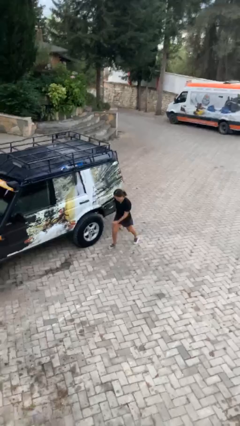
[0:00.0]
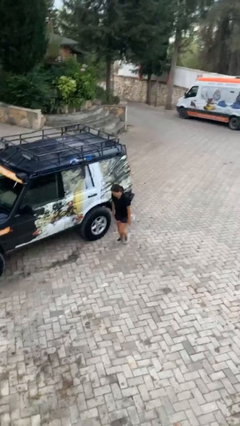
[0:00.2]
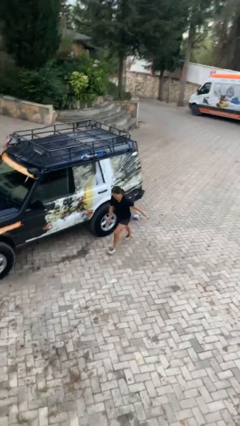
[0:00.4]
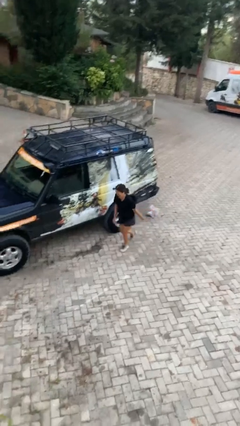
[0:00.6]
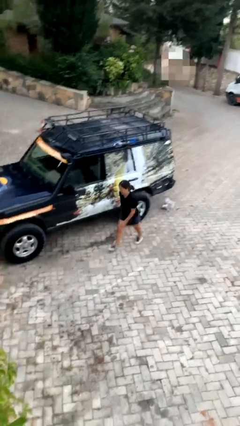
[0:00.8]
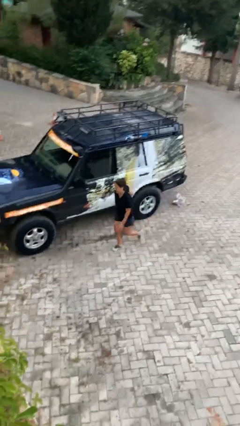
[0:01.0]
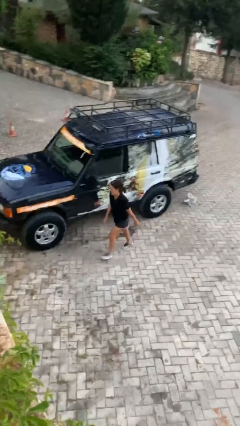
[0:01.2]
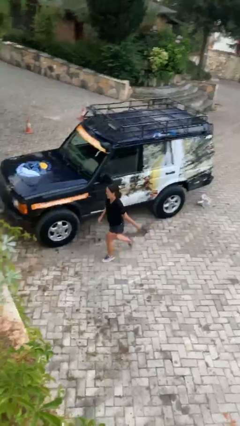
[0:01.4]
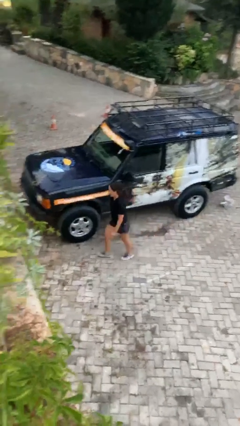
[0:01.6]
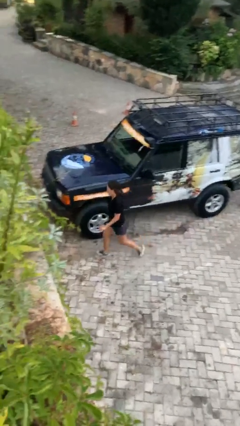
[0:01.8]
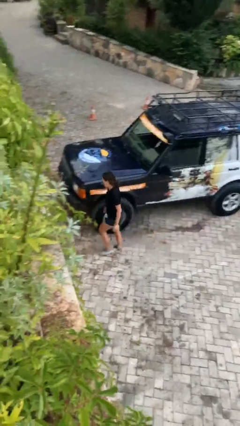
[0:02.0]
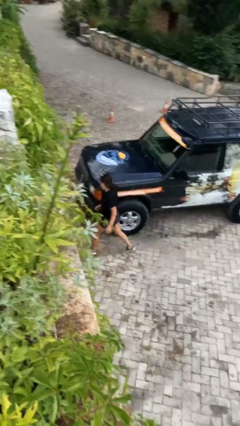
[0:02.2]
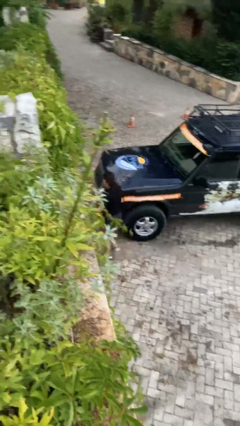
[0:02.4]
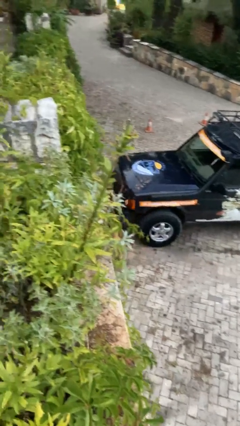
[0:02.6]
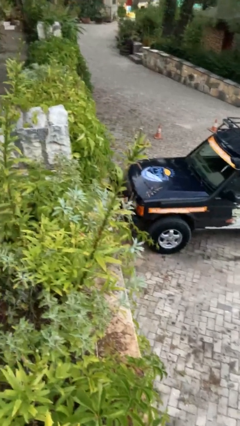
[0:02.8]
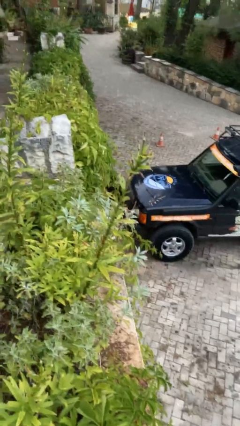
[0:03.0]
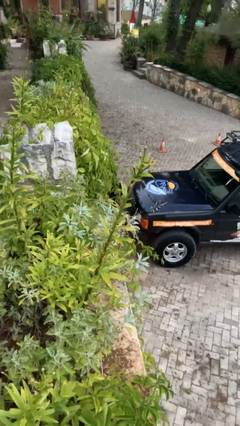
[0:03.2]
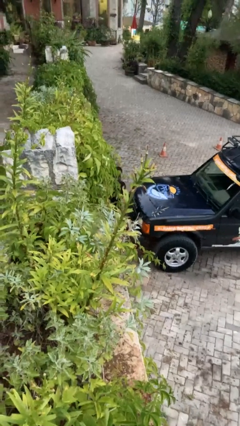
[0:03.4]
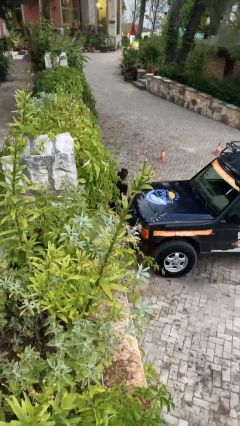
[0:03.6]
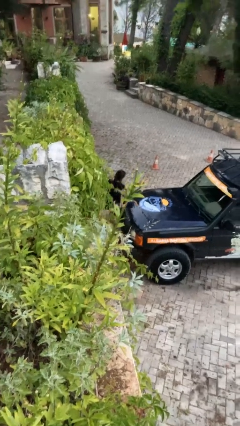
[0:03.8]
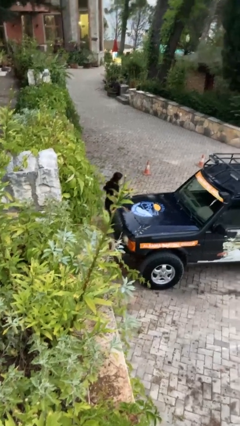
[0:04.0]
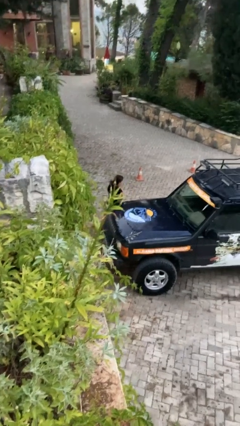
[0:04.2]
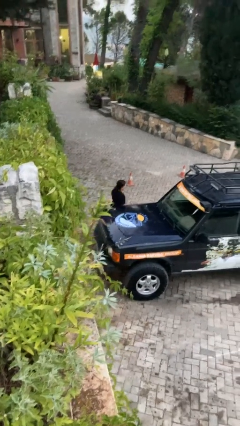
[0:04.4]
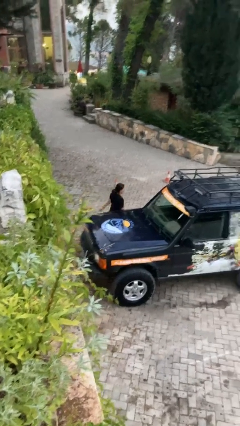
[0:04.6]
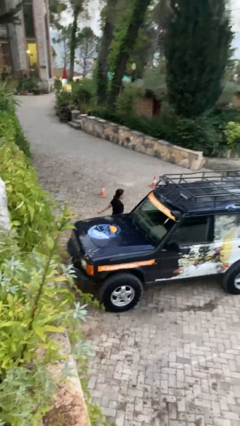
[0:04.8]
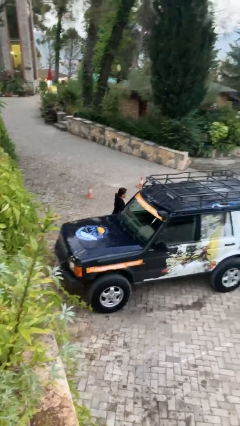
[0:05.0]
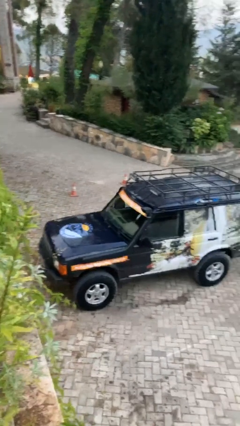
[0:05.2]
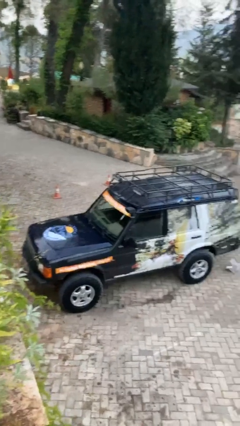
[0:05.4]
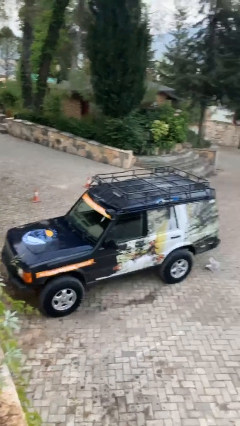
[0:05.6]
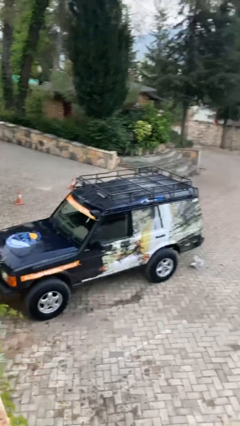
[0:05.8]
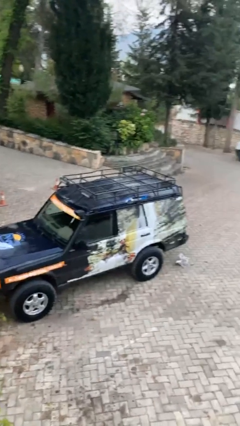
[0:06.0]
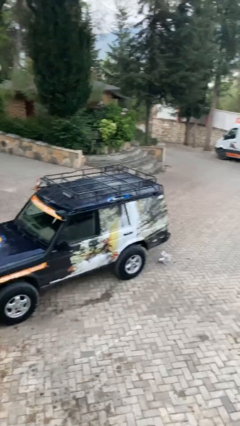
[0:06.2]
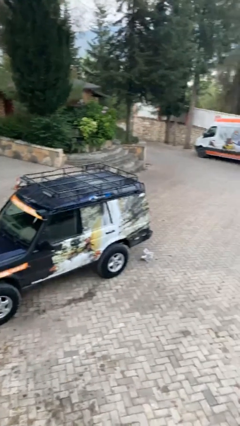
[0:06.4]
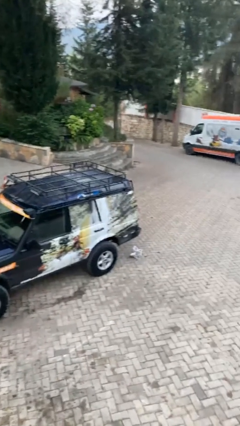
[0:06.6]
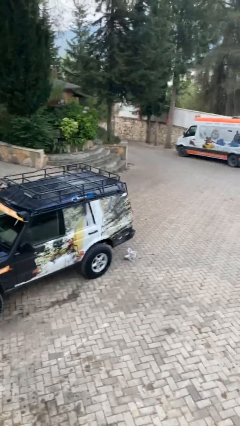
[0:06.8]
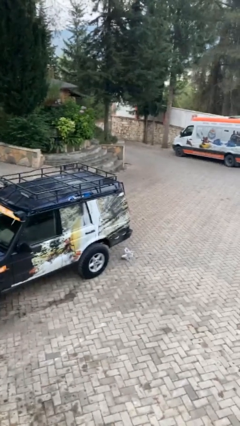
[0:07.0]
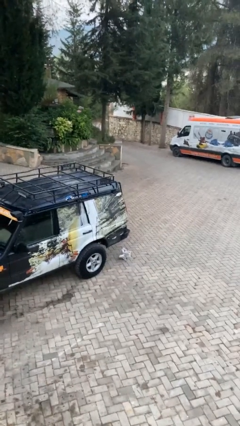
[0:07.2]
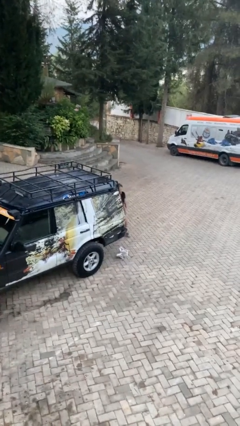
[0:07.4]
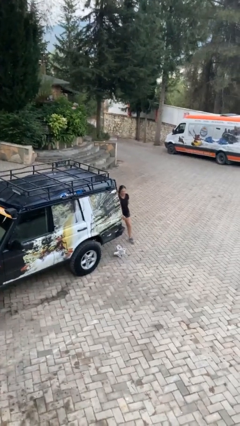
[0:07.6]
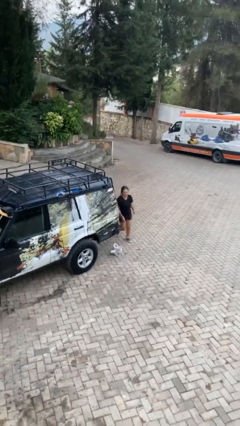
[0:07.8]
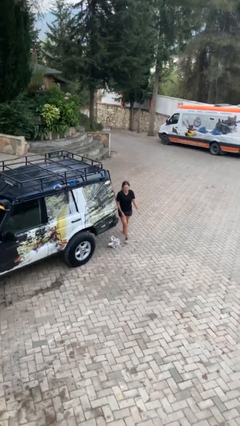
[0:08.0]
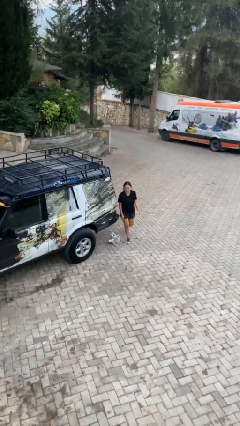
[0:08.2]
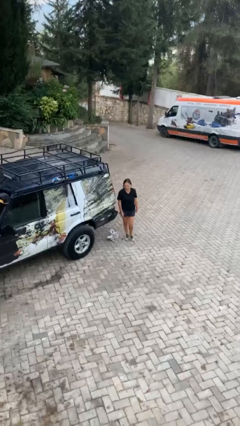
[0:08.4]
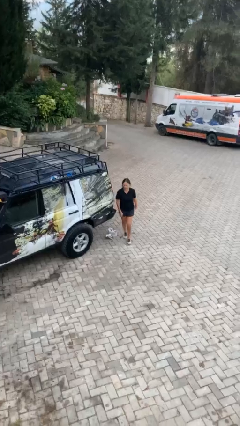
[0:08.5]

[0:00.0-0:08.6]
person walks around car

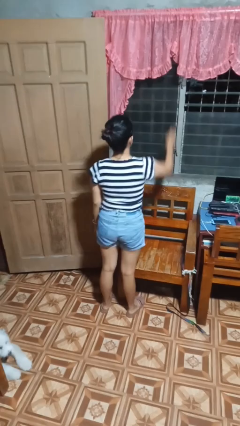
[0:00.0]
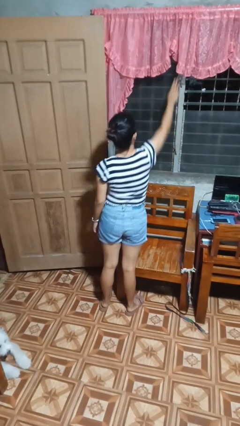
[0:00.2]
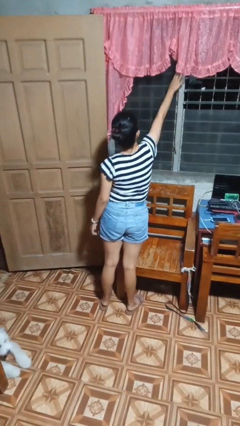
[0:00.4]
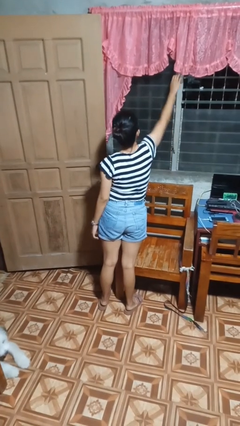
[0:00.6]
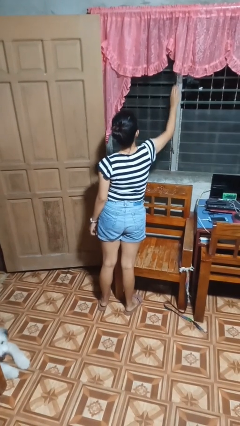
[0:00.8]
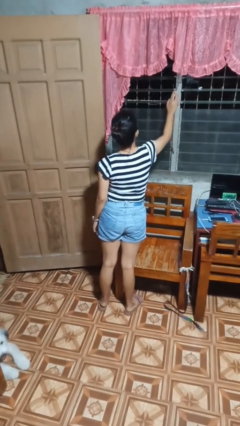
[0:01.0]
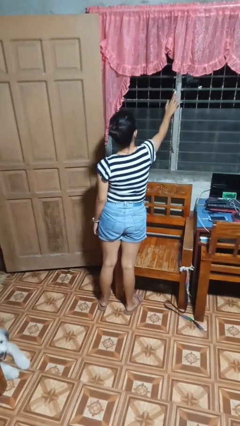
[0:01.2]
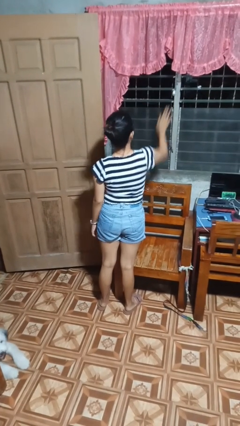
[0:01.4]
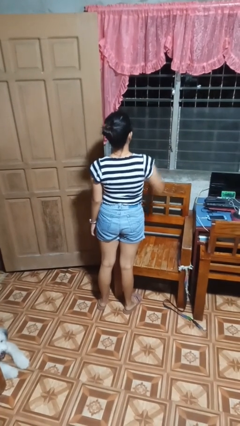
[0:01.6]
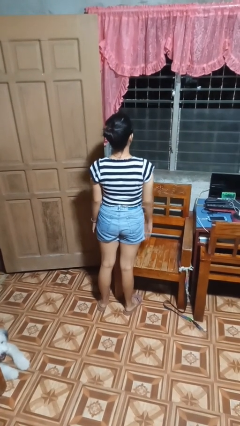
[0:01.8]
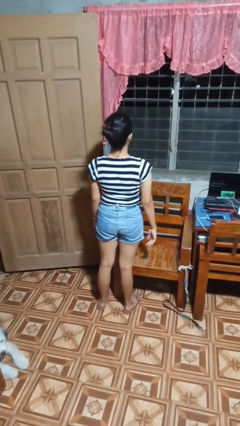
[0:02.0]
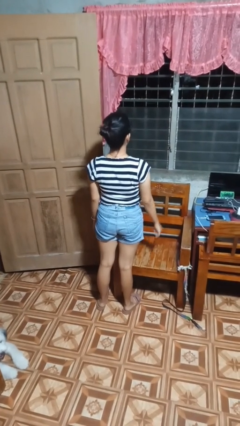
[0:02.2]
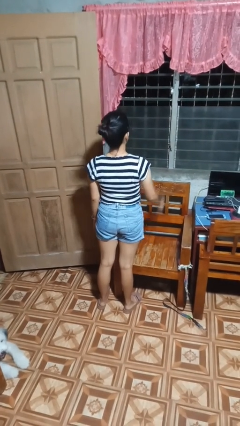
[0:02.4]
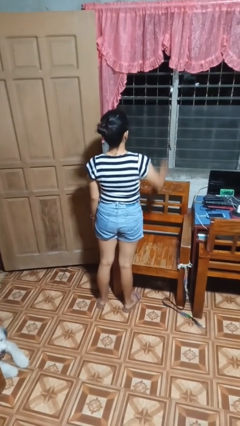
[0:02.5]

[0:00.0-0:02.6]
person opens home window

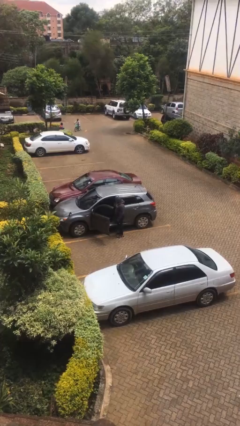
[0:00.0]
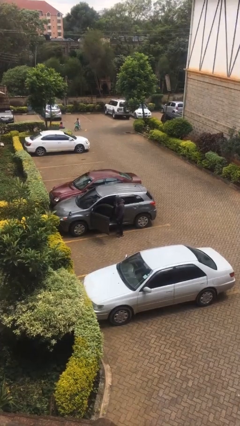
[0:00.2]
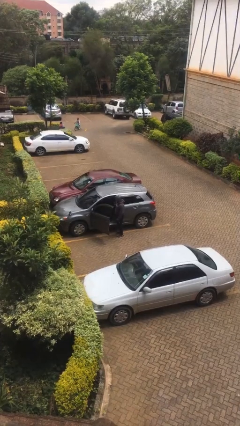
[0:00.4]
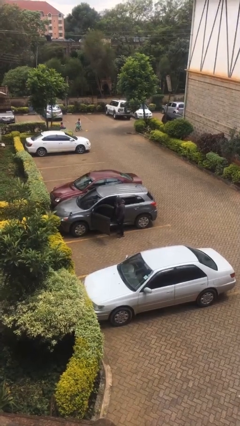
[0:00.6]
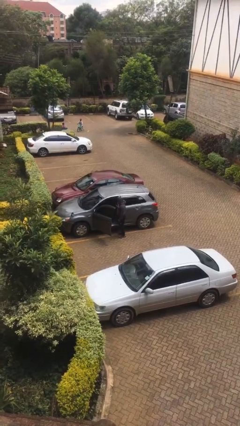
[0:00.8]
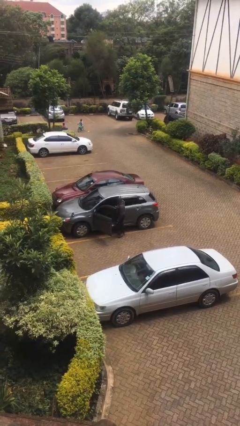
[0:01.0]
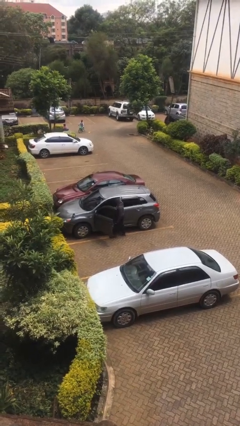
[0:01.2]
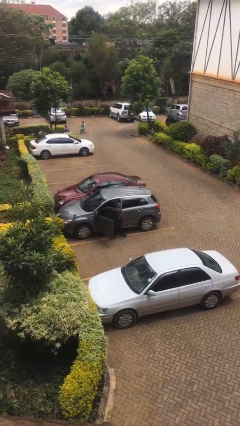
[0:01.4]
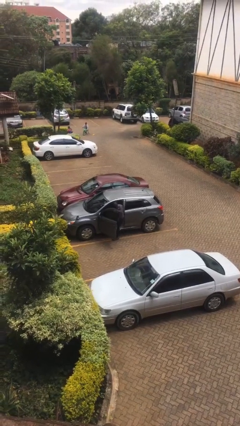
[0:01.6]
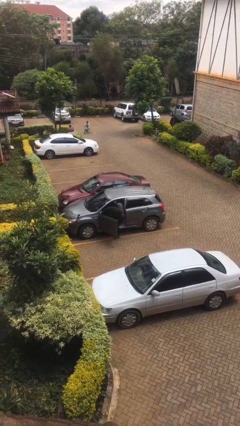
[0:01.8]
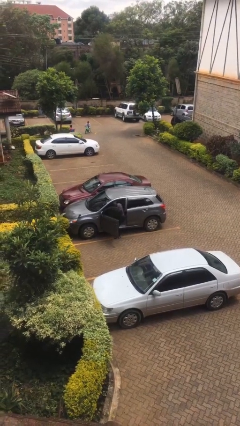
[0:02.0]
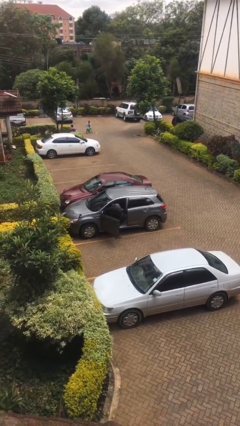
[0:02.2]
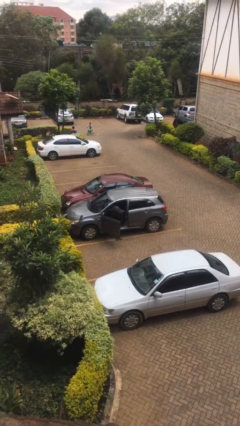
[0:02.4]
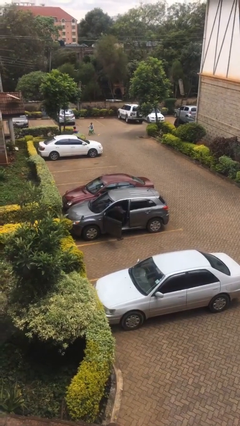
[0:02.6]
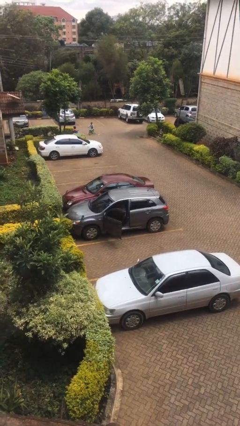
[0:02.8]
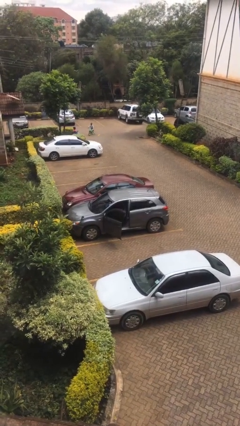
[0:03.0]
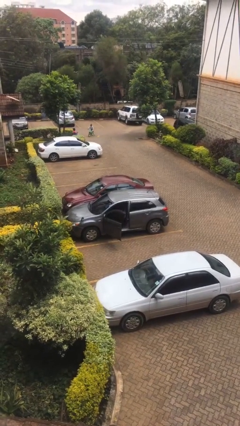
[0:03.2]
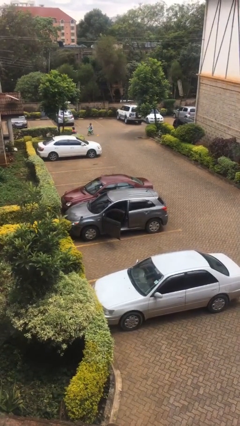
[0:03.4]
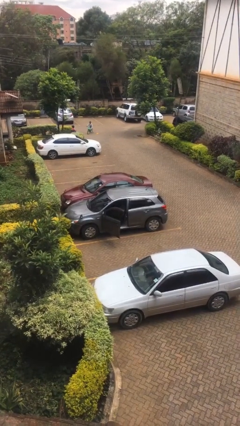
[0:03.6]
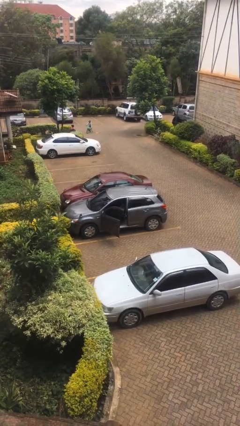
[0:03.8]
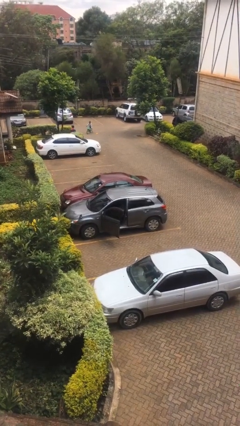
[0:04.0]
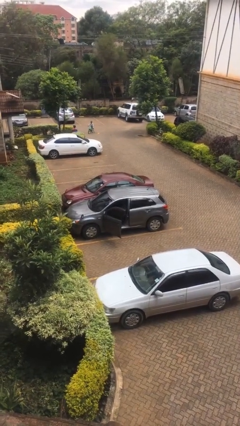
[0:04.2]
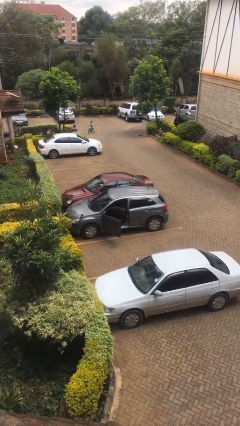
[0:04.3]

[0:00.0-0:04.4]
person enters car

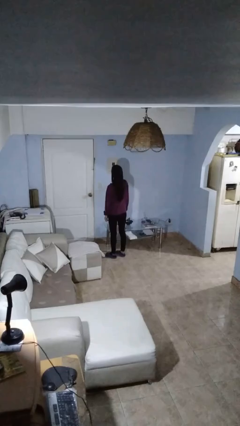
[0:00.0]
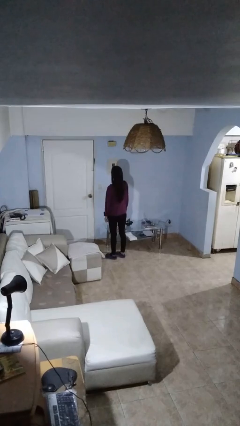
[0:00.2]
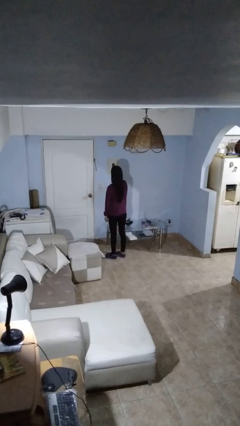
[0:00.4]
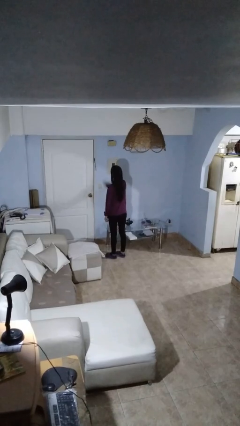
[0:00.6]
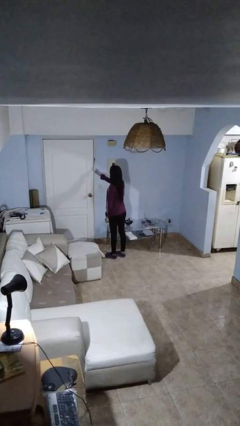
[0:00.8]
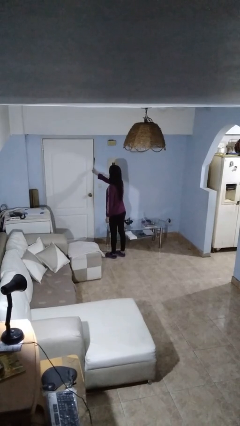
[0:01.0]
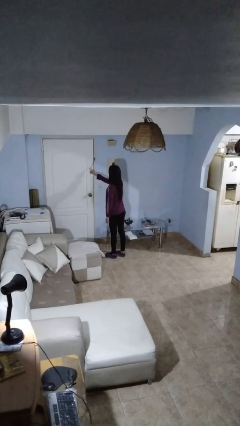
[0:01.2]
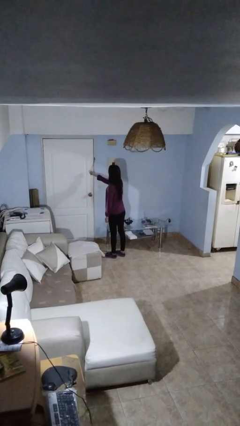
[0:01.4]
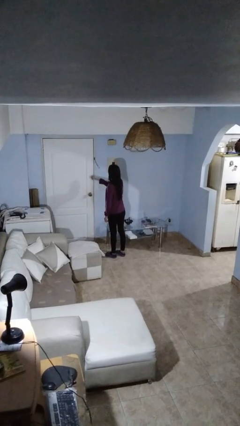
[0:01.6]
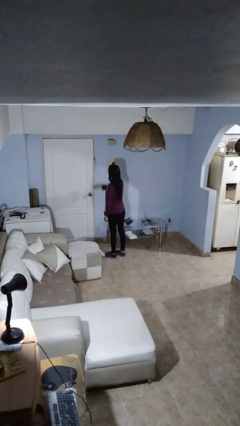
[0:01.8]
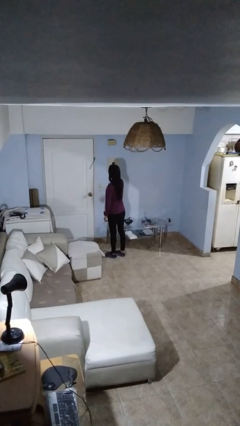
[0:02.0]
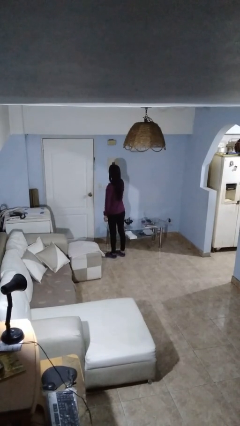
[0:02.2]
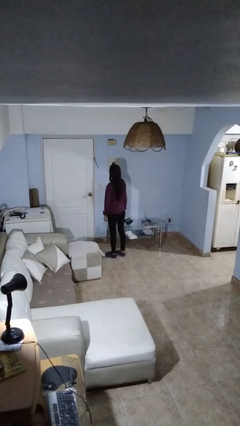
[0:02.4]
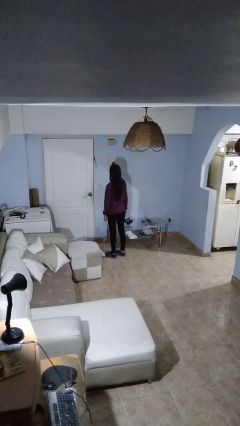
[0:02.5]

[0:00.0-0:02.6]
person taps object with finger
